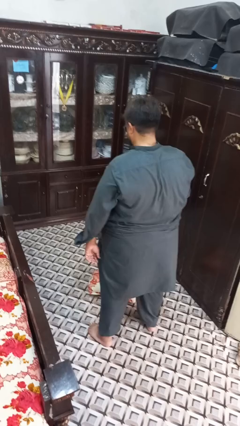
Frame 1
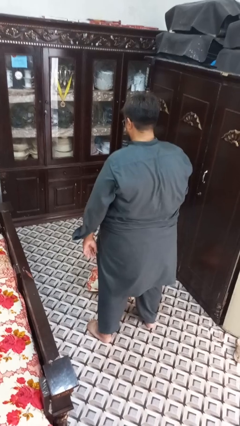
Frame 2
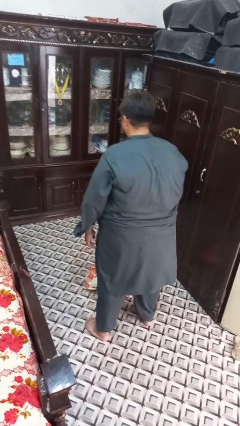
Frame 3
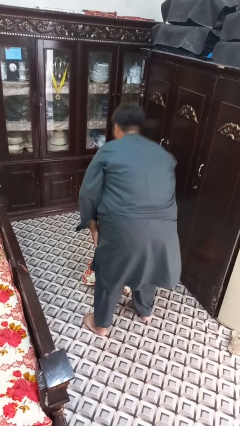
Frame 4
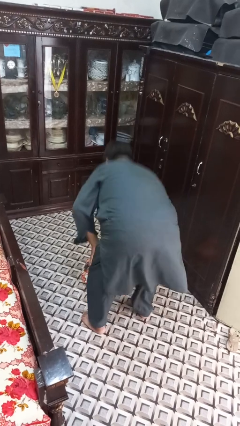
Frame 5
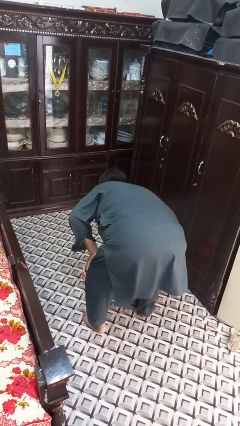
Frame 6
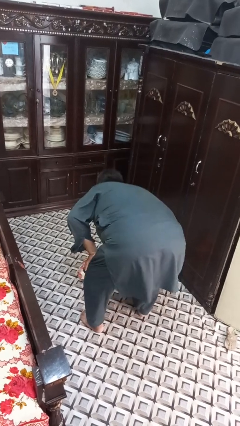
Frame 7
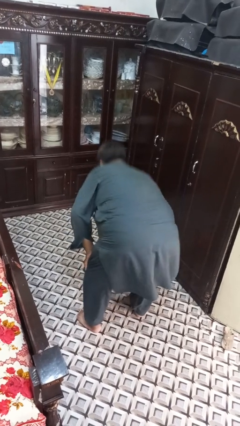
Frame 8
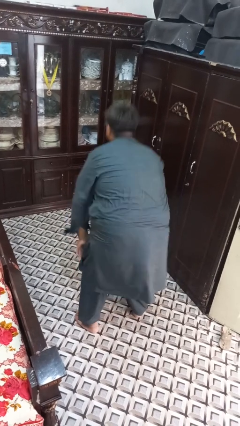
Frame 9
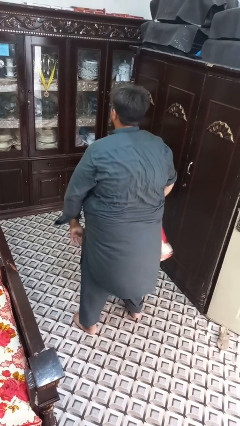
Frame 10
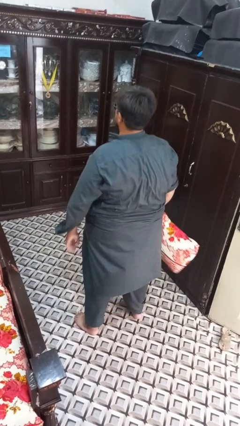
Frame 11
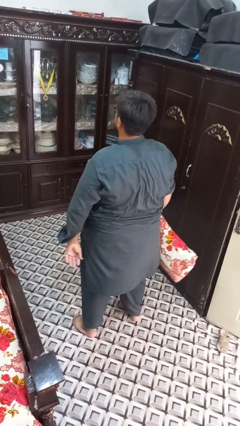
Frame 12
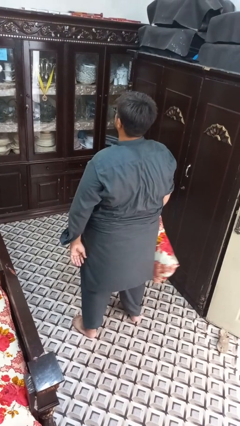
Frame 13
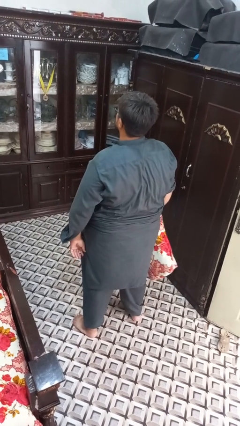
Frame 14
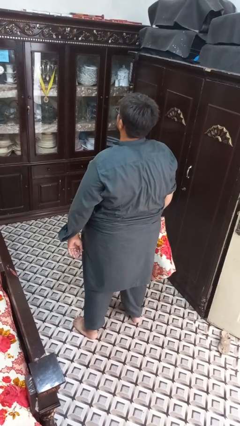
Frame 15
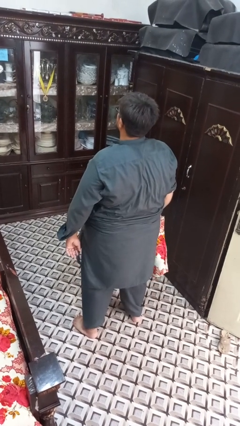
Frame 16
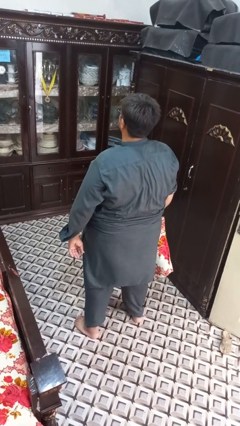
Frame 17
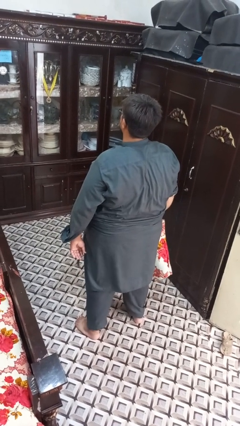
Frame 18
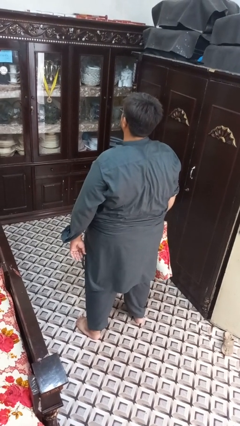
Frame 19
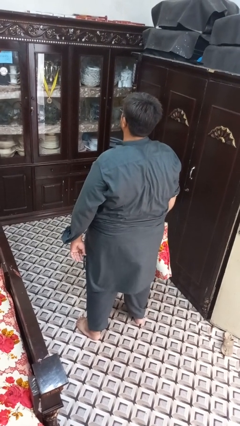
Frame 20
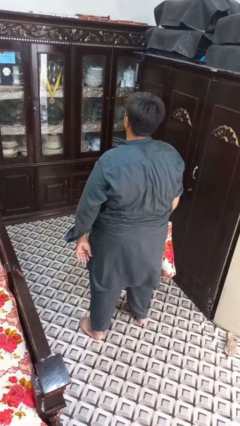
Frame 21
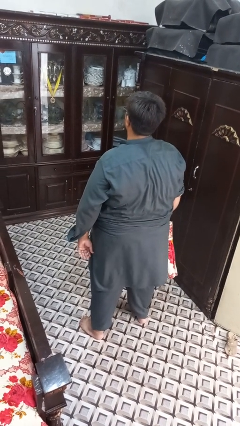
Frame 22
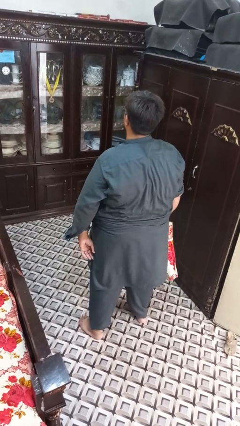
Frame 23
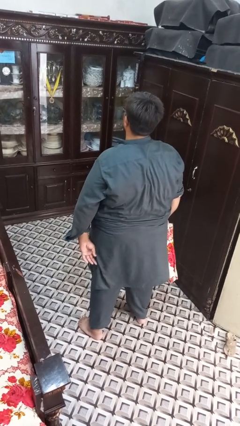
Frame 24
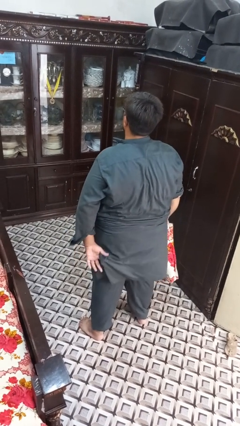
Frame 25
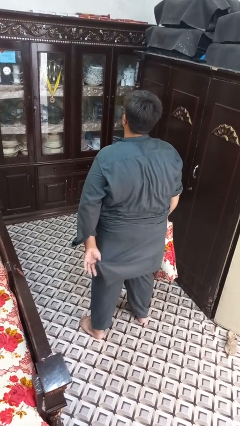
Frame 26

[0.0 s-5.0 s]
person picks up object from floor

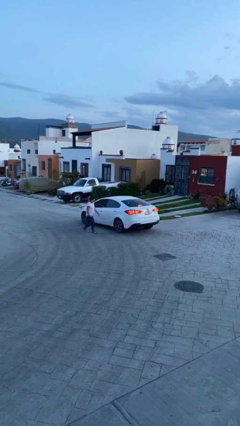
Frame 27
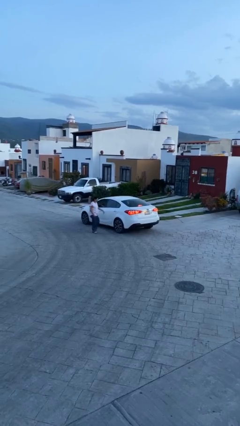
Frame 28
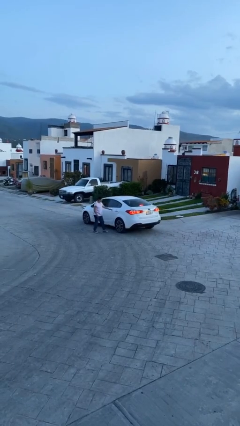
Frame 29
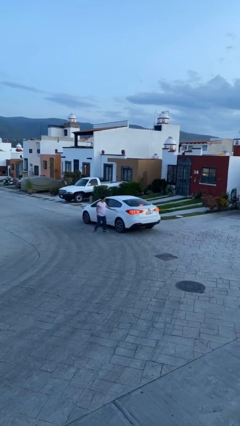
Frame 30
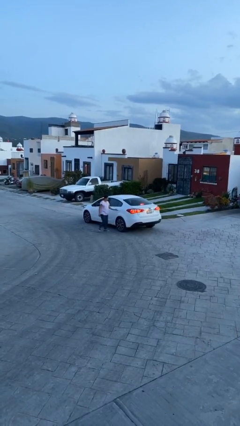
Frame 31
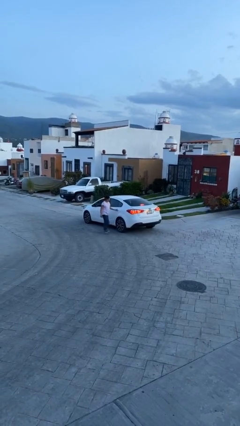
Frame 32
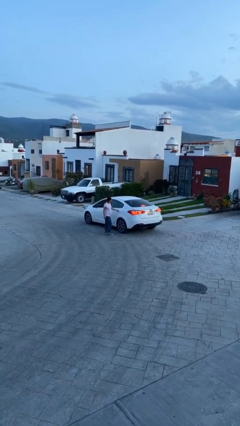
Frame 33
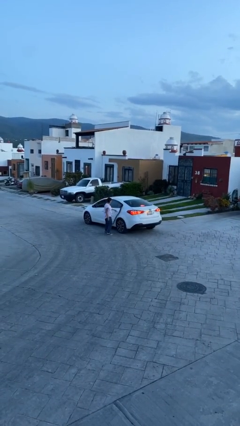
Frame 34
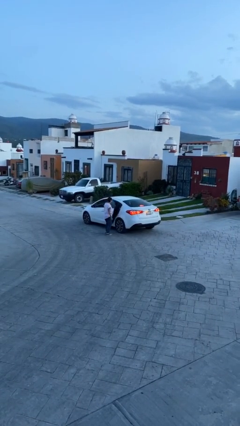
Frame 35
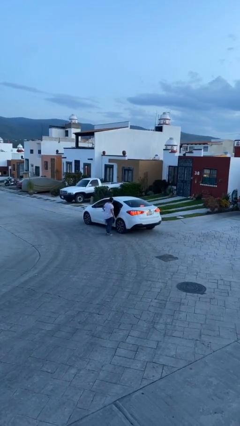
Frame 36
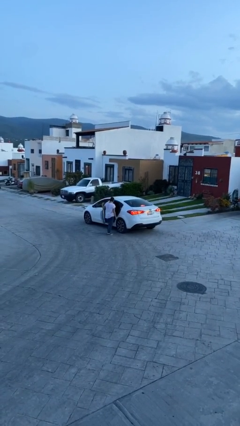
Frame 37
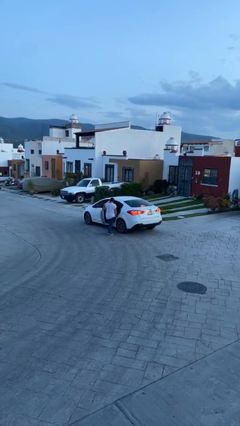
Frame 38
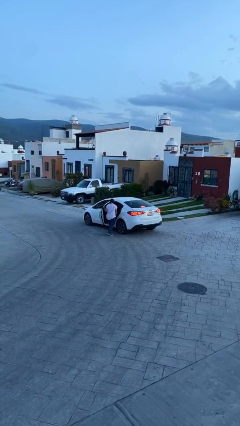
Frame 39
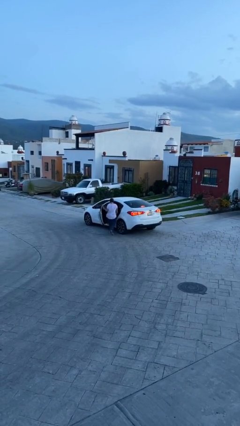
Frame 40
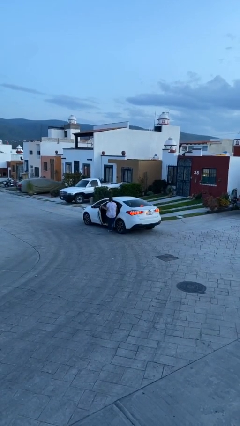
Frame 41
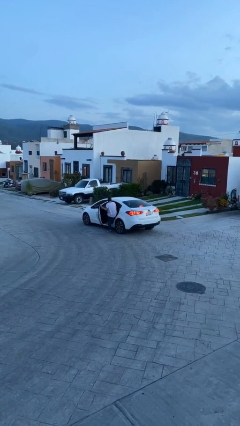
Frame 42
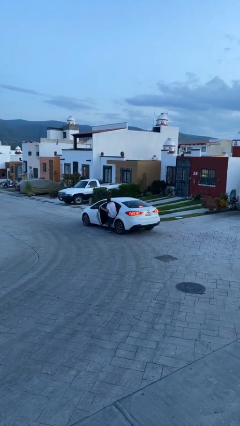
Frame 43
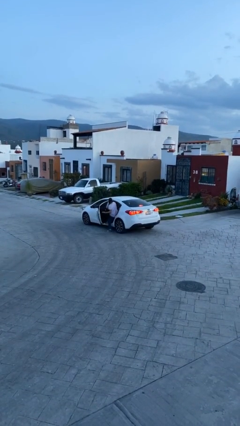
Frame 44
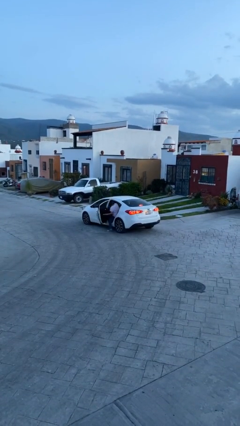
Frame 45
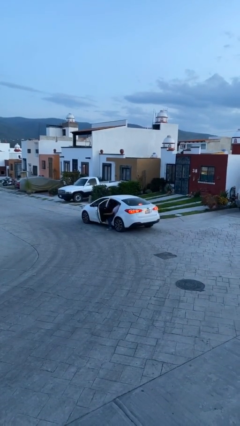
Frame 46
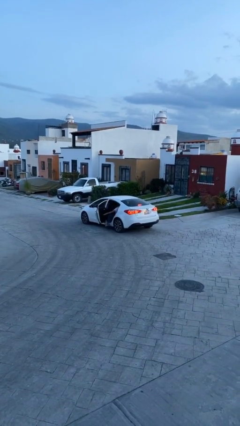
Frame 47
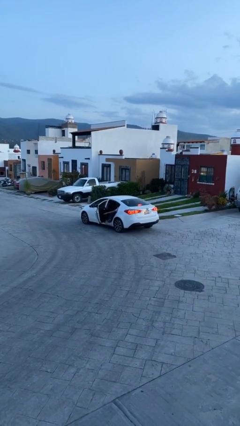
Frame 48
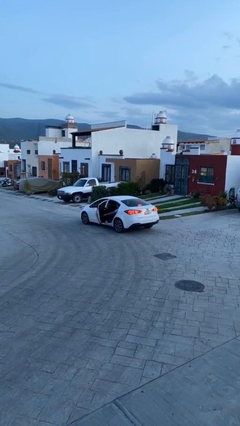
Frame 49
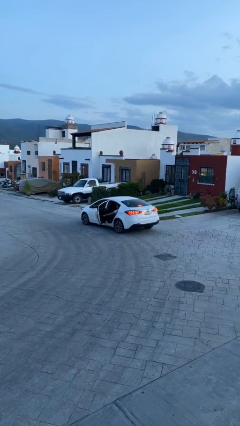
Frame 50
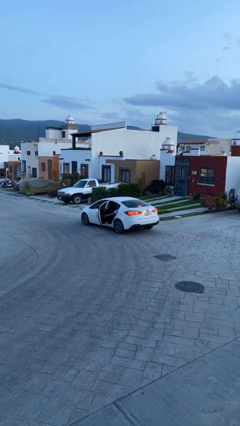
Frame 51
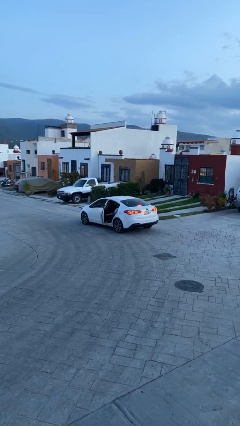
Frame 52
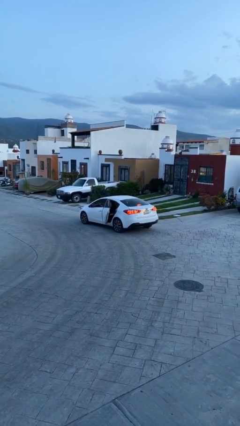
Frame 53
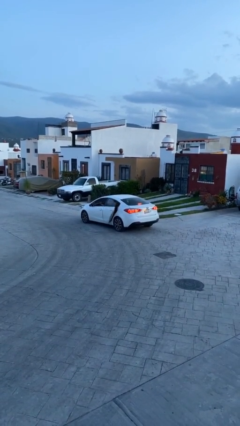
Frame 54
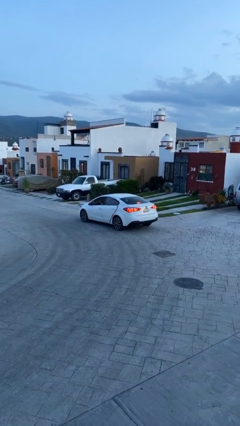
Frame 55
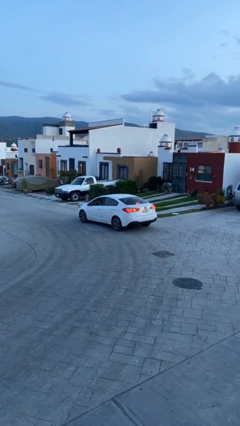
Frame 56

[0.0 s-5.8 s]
car picks up person

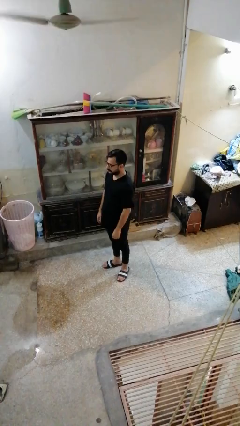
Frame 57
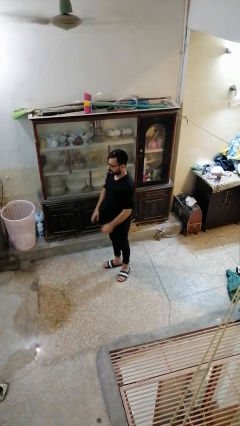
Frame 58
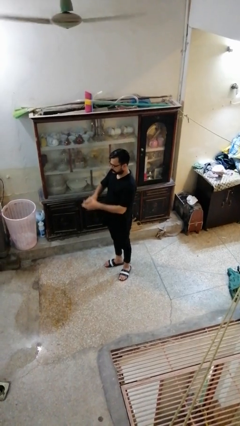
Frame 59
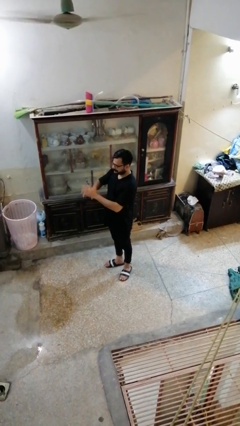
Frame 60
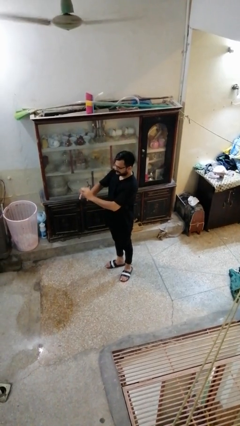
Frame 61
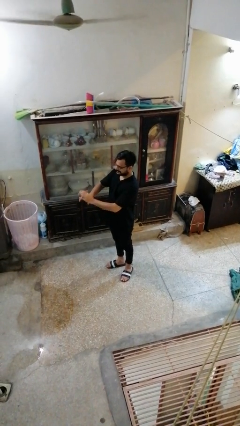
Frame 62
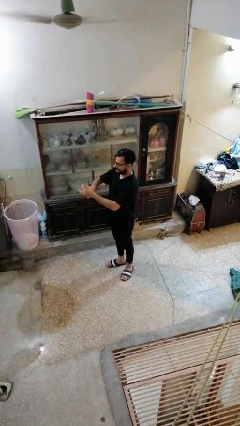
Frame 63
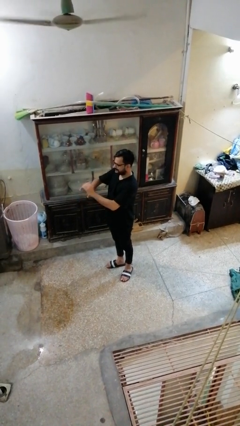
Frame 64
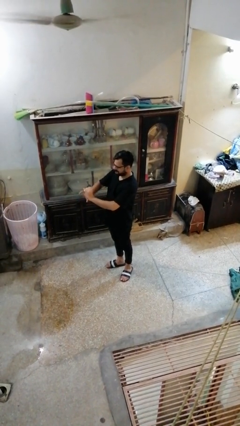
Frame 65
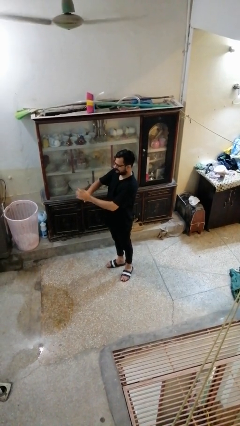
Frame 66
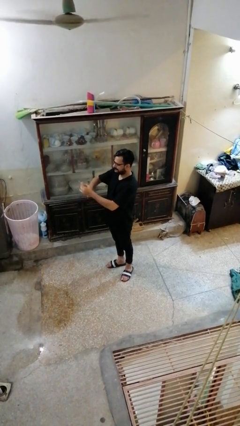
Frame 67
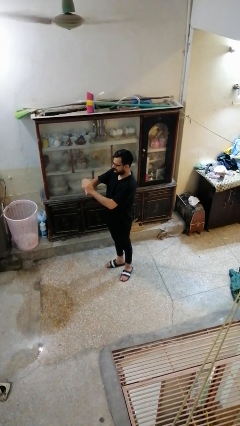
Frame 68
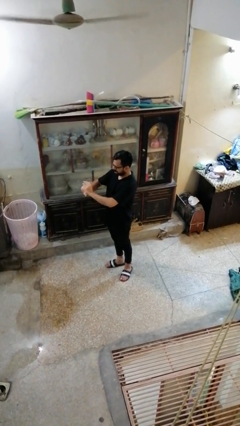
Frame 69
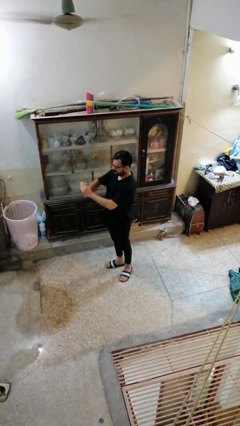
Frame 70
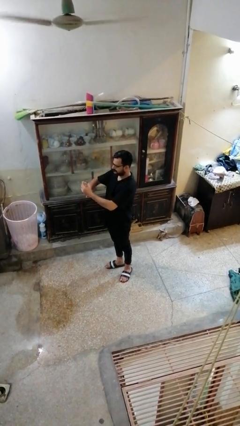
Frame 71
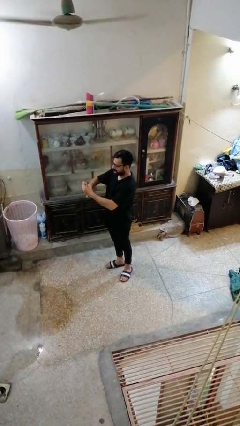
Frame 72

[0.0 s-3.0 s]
person cracks knuckles

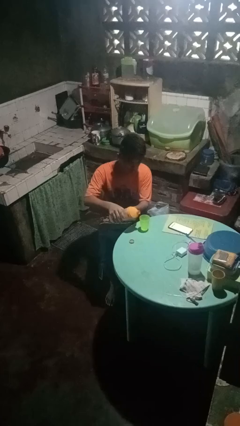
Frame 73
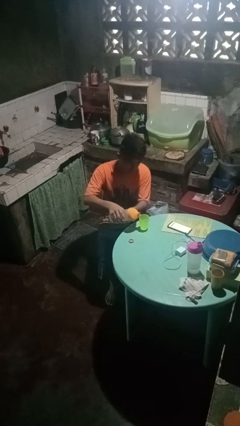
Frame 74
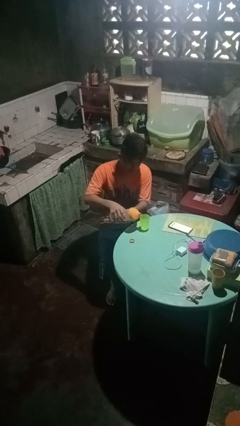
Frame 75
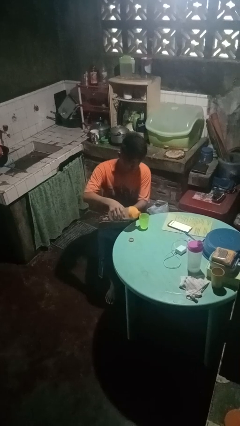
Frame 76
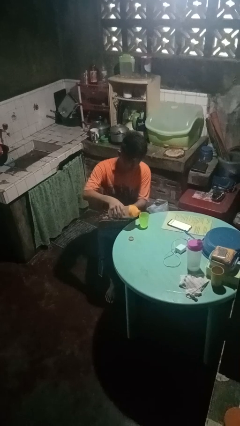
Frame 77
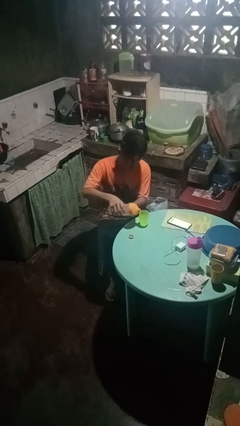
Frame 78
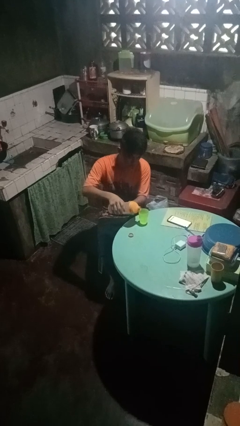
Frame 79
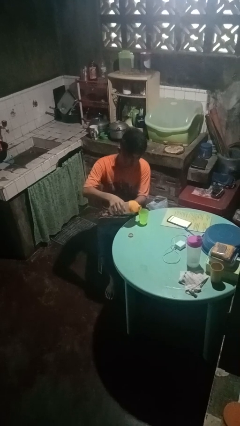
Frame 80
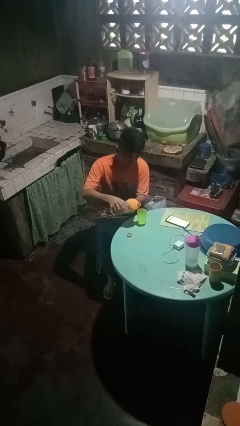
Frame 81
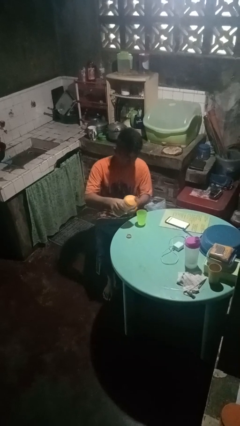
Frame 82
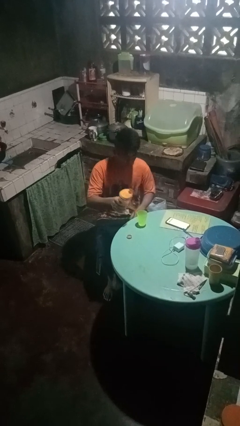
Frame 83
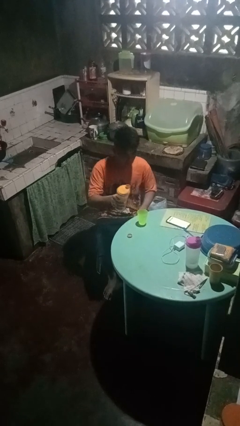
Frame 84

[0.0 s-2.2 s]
person pours liquid into cup

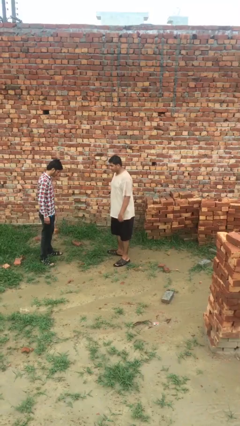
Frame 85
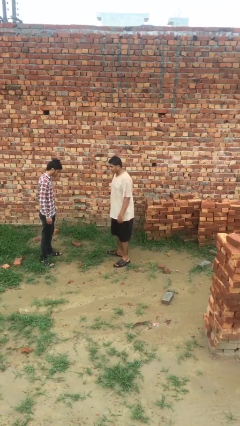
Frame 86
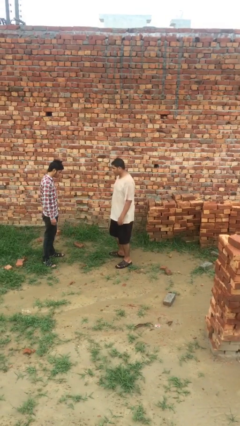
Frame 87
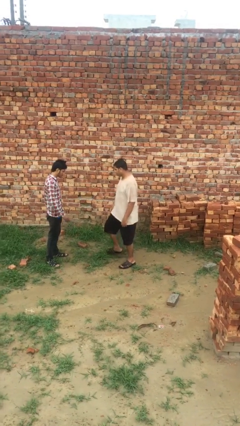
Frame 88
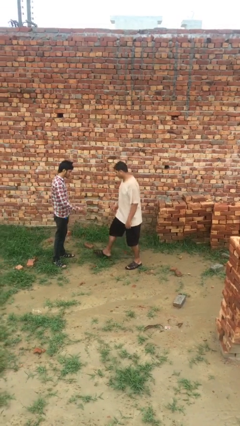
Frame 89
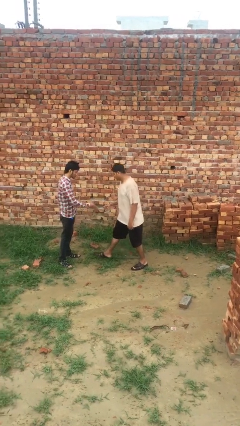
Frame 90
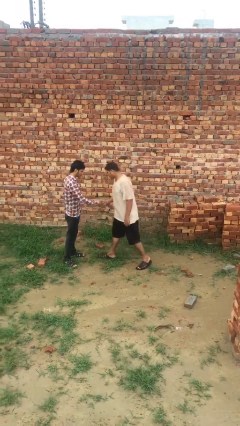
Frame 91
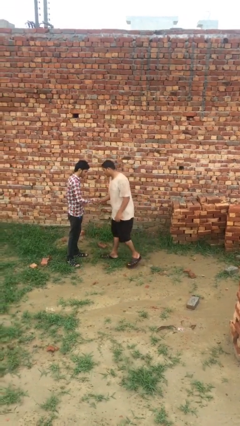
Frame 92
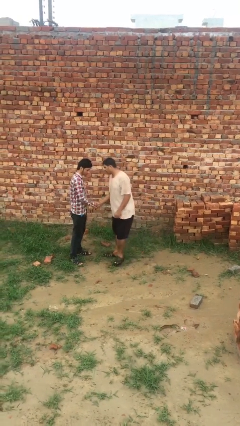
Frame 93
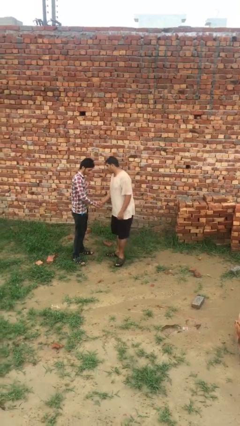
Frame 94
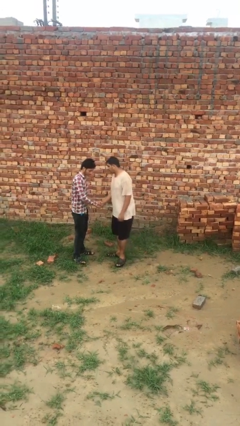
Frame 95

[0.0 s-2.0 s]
person shakes hand
